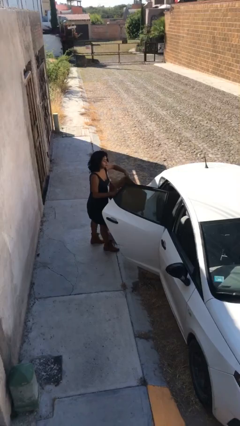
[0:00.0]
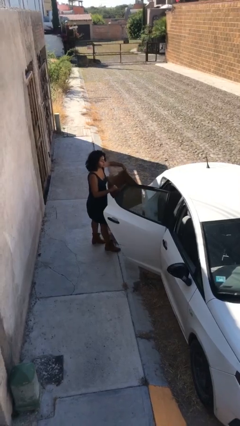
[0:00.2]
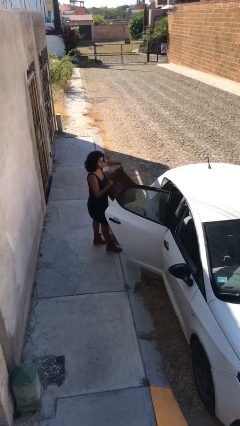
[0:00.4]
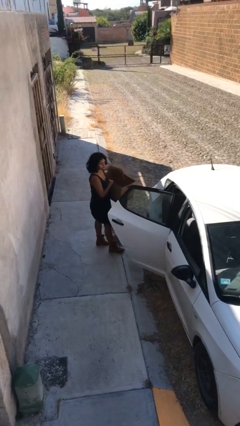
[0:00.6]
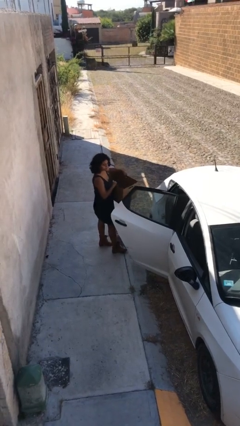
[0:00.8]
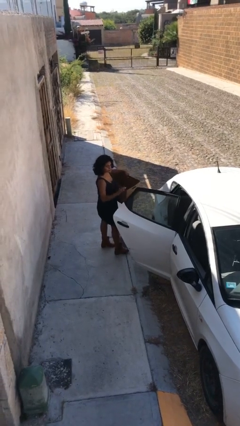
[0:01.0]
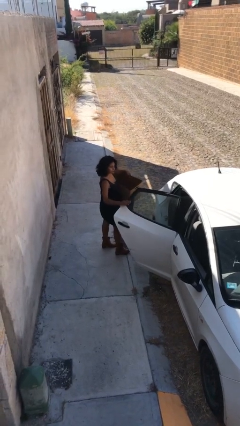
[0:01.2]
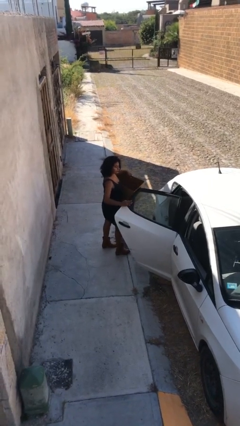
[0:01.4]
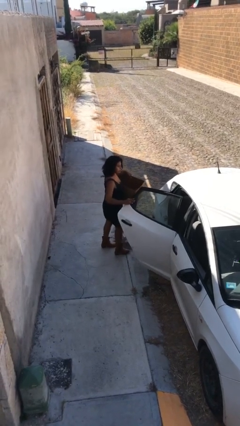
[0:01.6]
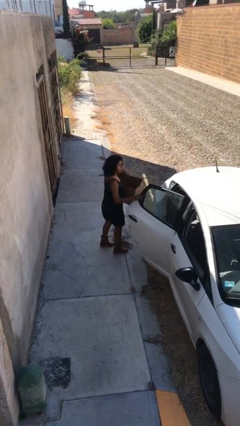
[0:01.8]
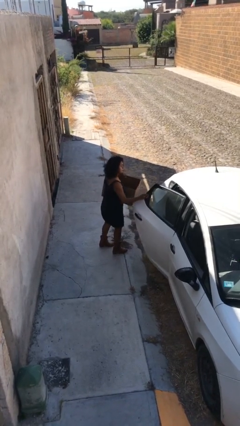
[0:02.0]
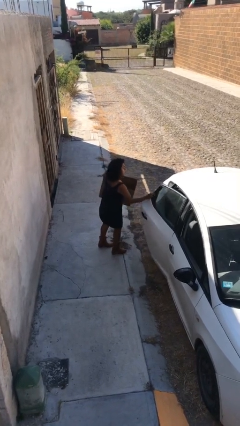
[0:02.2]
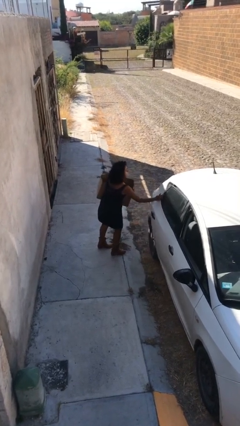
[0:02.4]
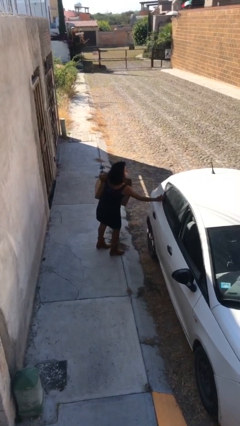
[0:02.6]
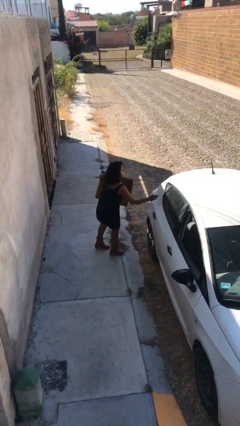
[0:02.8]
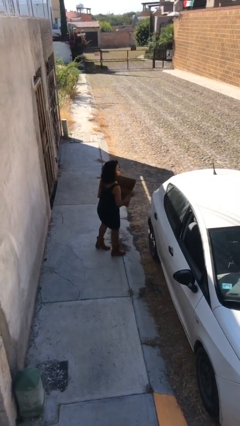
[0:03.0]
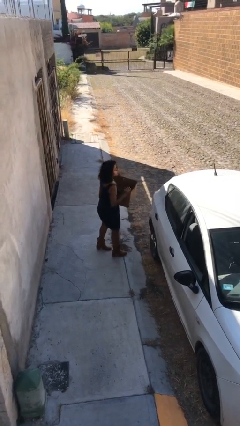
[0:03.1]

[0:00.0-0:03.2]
person closes car door

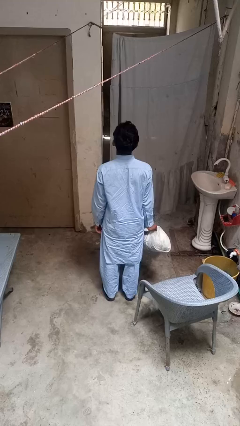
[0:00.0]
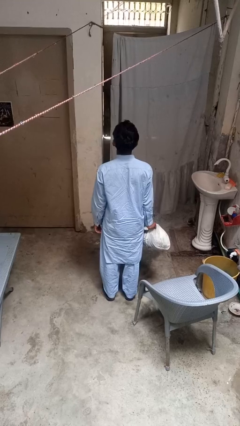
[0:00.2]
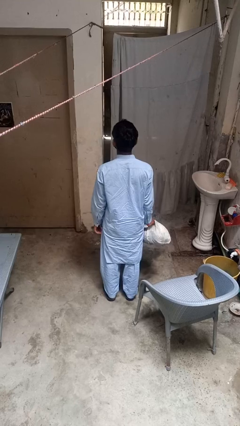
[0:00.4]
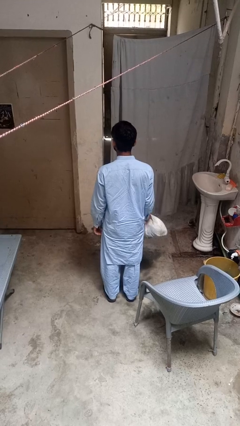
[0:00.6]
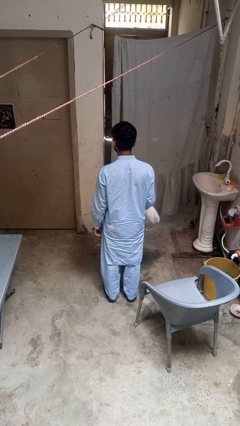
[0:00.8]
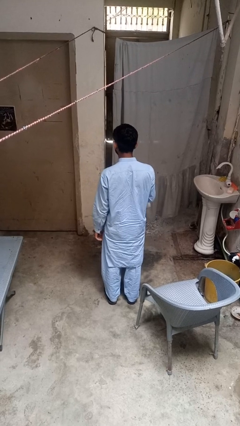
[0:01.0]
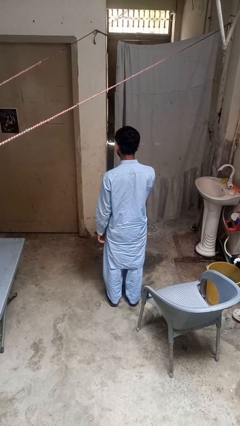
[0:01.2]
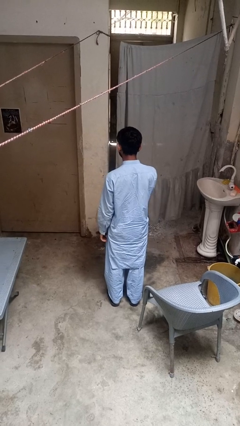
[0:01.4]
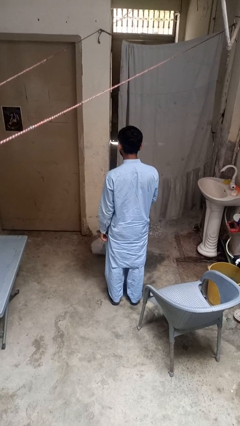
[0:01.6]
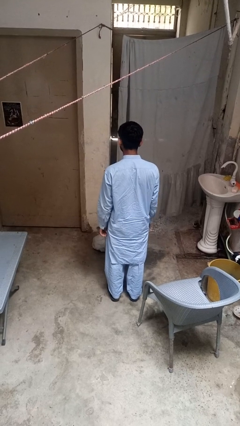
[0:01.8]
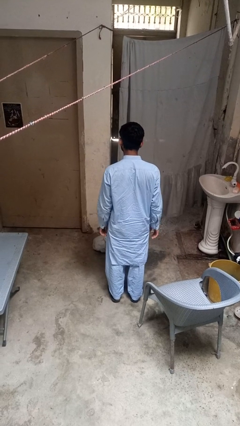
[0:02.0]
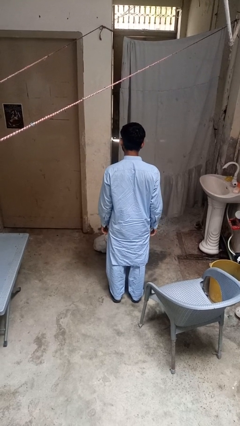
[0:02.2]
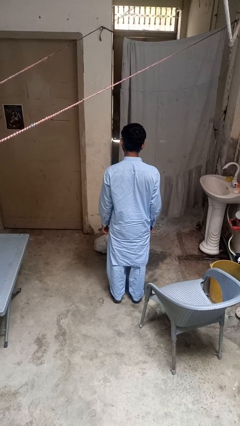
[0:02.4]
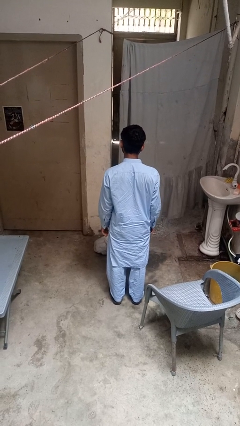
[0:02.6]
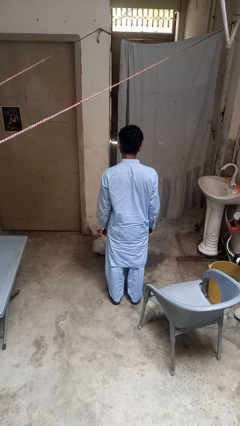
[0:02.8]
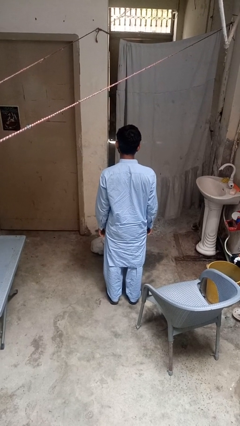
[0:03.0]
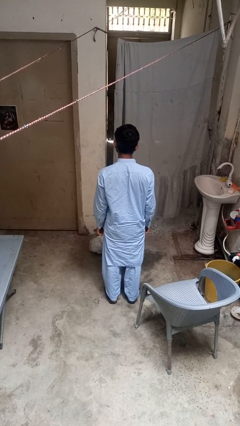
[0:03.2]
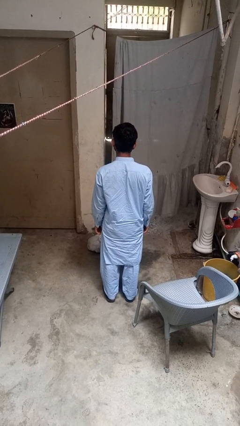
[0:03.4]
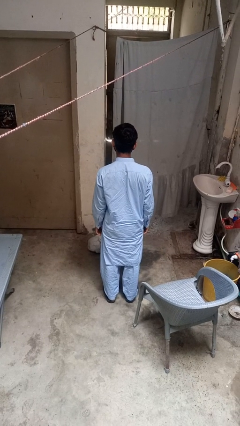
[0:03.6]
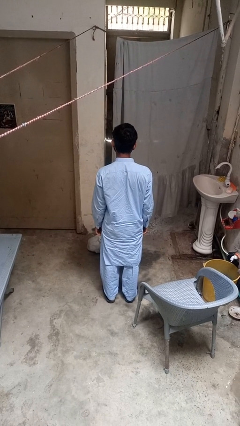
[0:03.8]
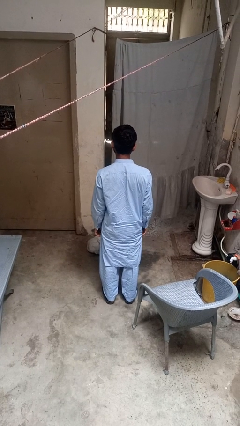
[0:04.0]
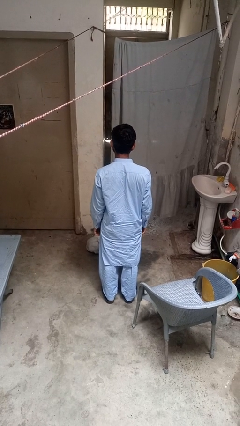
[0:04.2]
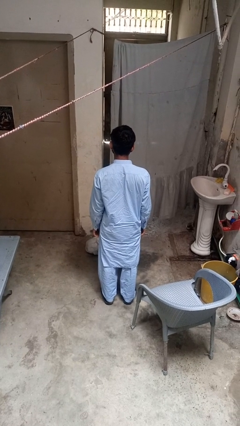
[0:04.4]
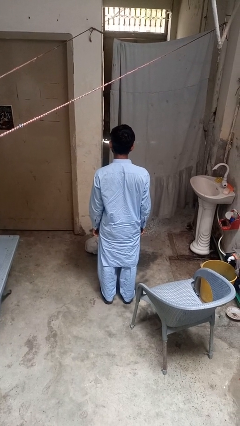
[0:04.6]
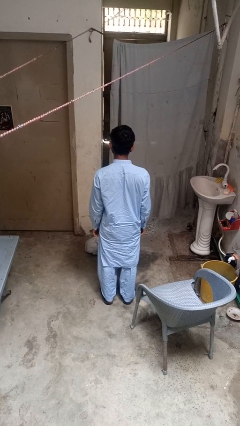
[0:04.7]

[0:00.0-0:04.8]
person throws object to ground

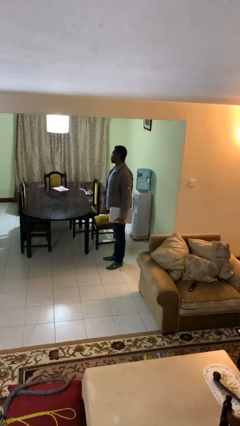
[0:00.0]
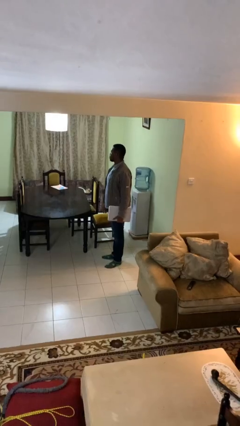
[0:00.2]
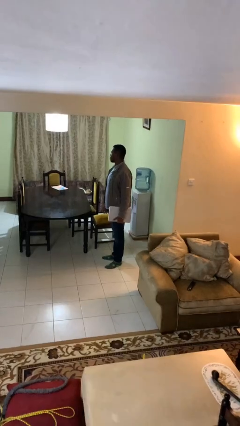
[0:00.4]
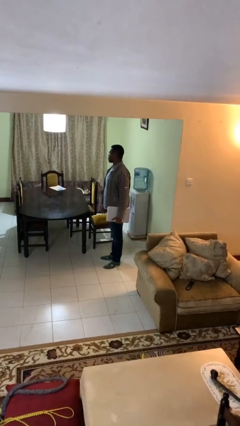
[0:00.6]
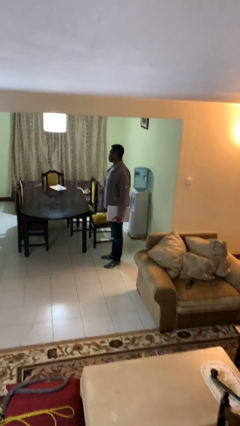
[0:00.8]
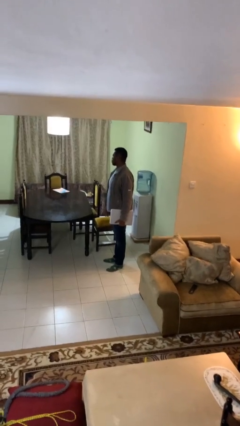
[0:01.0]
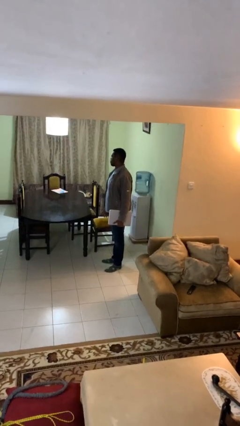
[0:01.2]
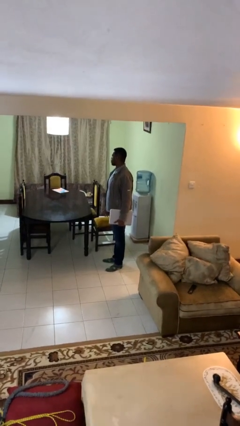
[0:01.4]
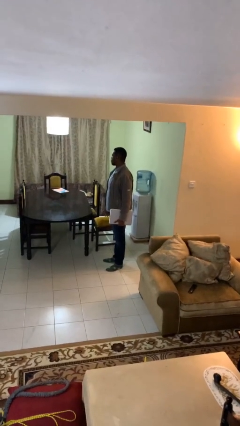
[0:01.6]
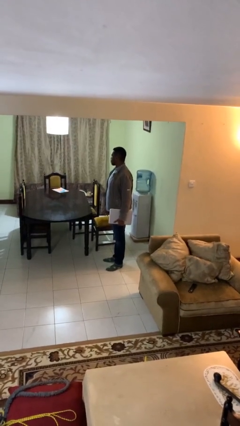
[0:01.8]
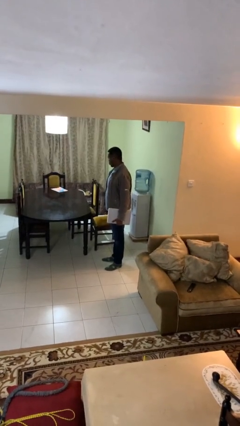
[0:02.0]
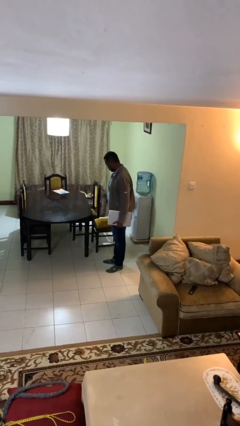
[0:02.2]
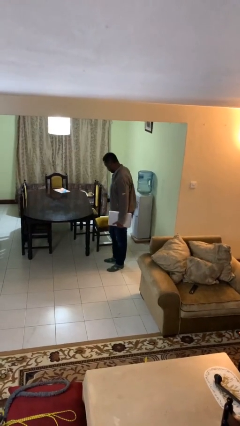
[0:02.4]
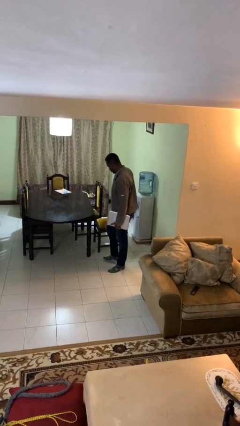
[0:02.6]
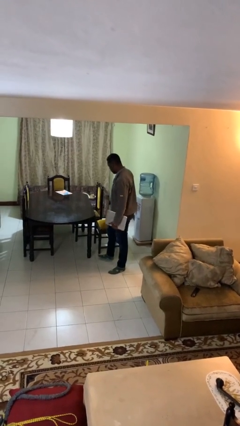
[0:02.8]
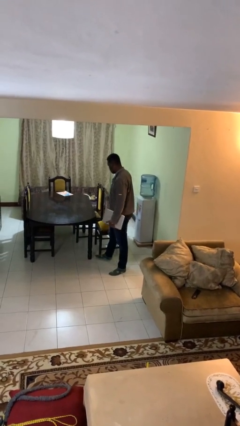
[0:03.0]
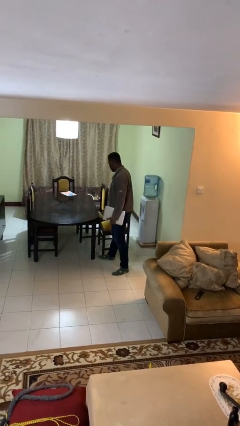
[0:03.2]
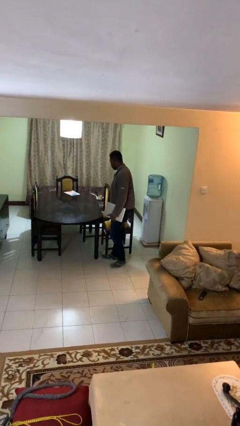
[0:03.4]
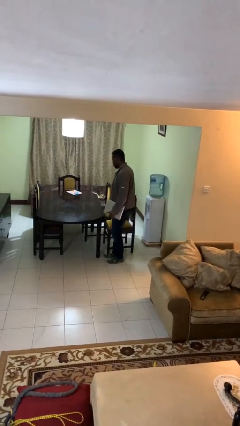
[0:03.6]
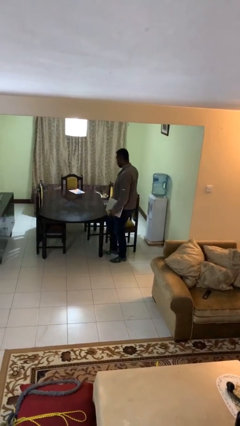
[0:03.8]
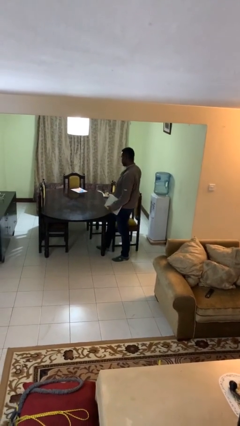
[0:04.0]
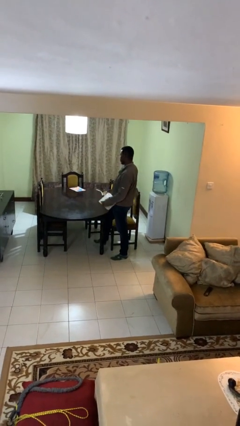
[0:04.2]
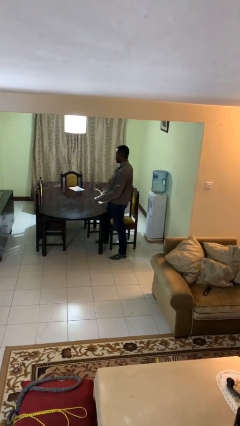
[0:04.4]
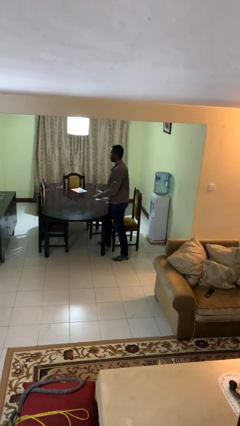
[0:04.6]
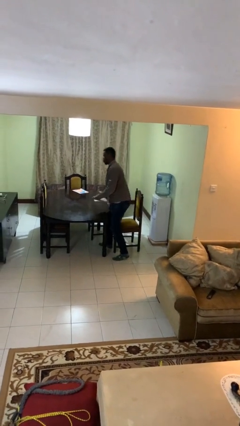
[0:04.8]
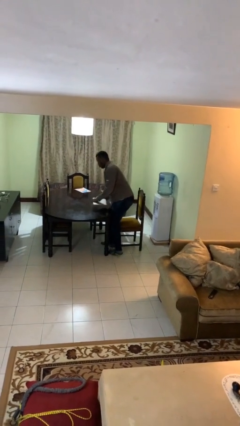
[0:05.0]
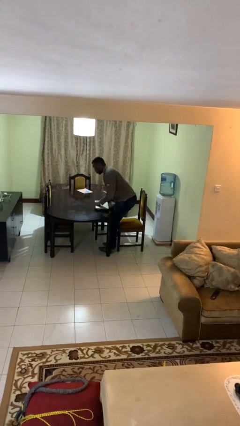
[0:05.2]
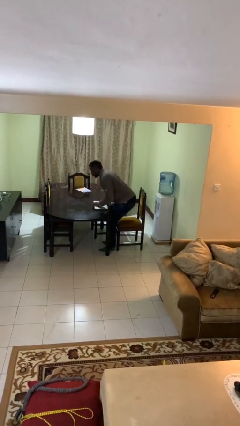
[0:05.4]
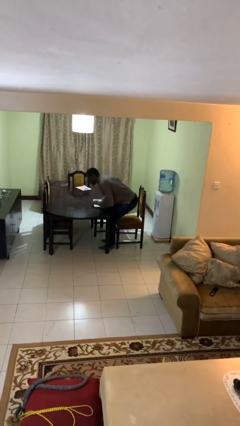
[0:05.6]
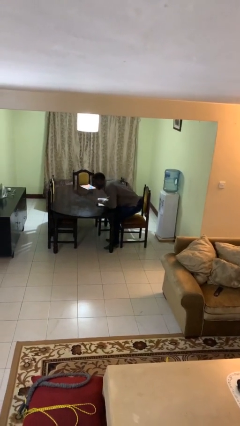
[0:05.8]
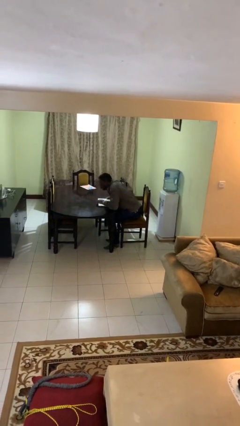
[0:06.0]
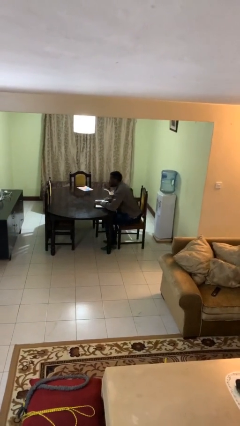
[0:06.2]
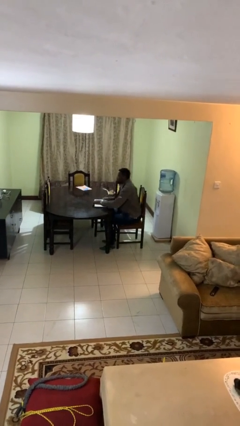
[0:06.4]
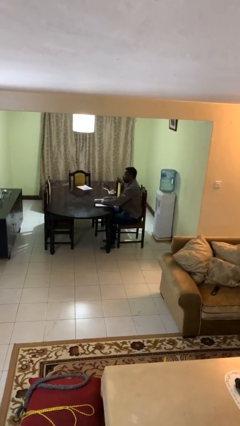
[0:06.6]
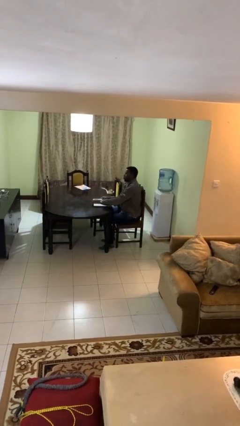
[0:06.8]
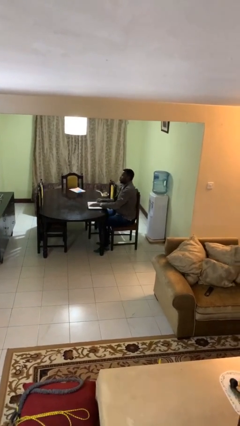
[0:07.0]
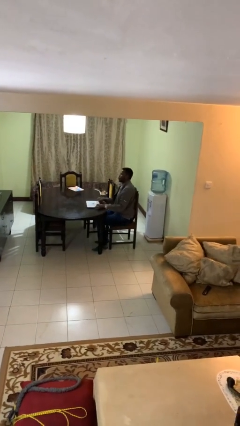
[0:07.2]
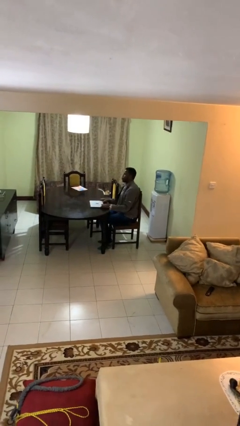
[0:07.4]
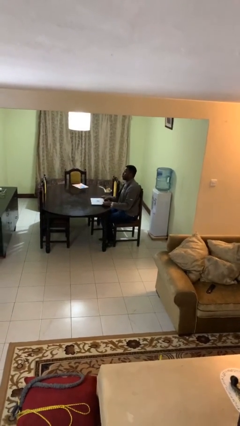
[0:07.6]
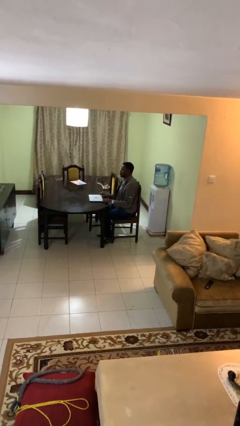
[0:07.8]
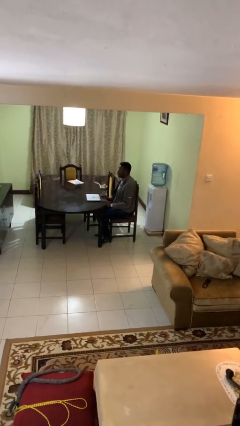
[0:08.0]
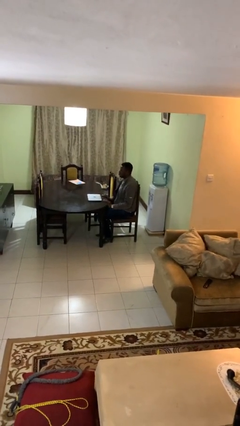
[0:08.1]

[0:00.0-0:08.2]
person sits down

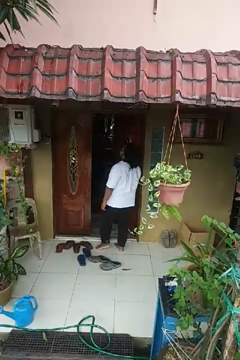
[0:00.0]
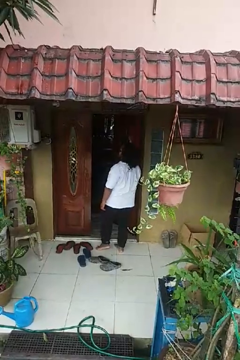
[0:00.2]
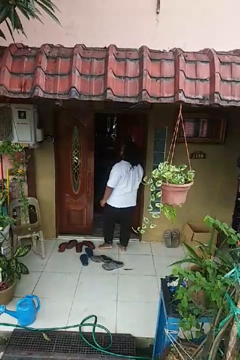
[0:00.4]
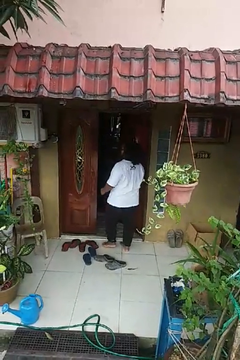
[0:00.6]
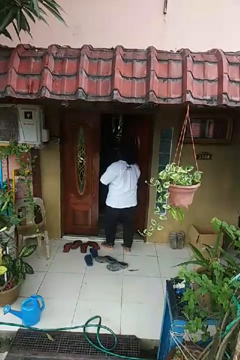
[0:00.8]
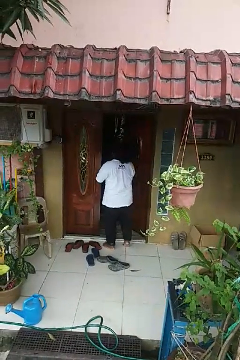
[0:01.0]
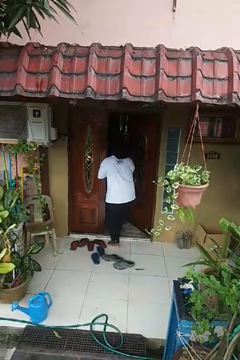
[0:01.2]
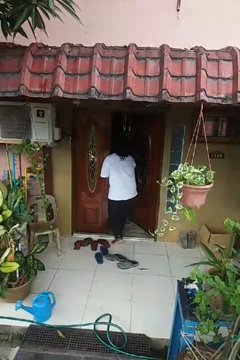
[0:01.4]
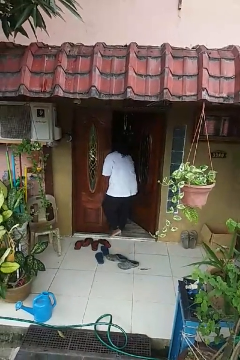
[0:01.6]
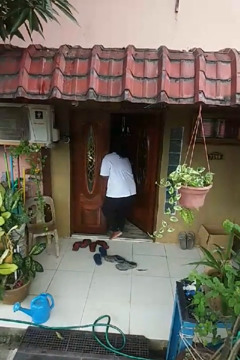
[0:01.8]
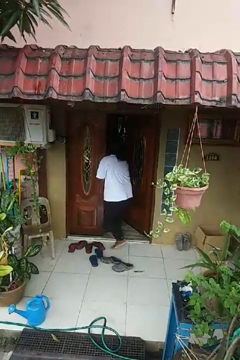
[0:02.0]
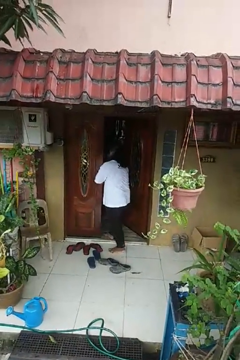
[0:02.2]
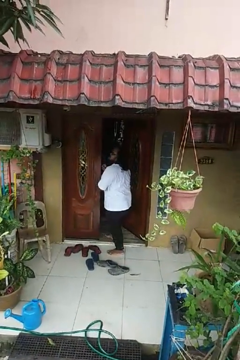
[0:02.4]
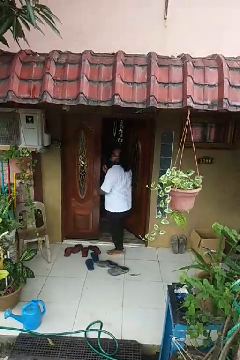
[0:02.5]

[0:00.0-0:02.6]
person bumps into wall
